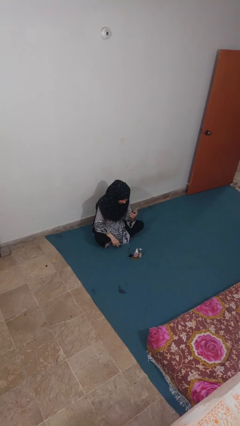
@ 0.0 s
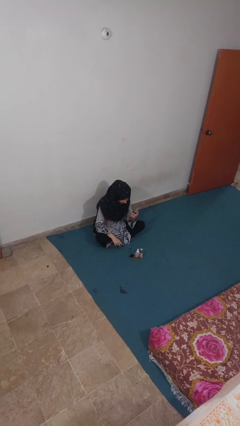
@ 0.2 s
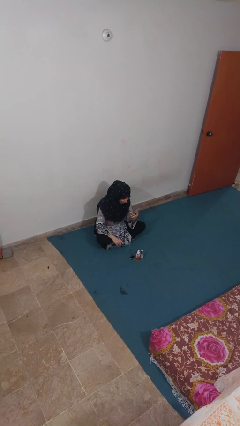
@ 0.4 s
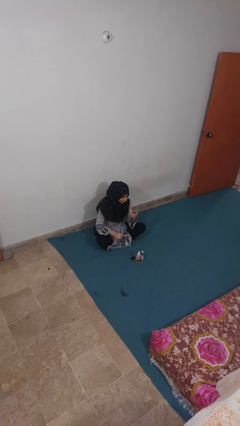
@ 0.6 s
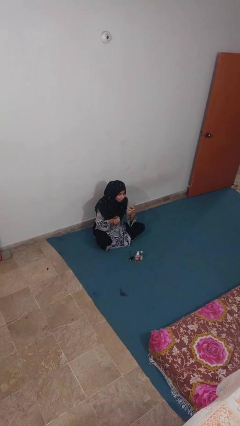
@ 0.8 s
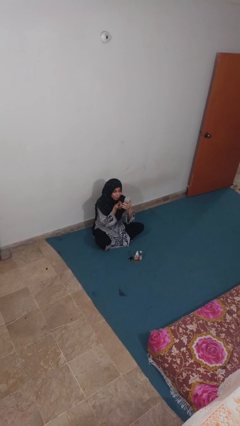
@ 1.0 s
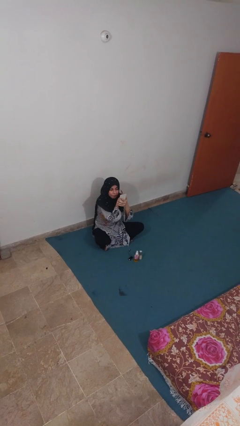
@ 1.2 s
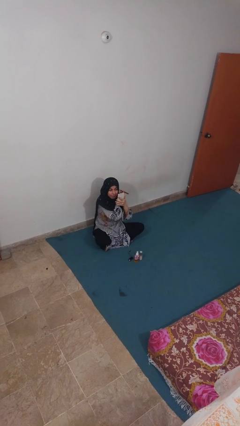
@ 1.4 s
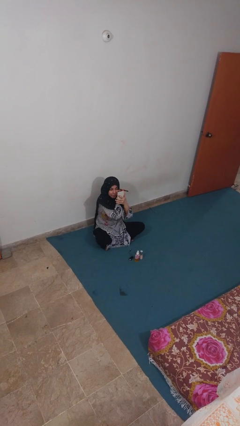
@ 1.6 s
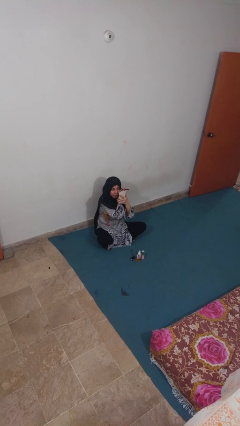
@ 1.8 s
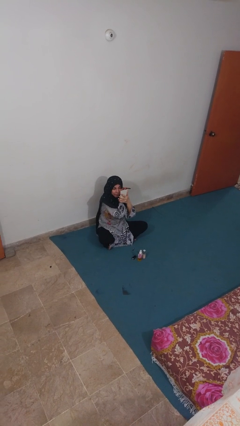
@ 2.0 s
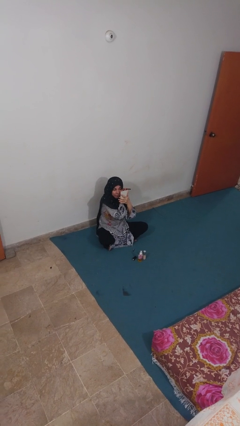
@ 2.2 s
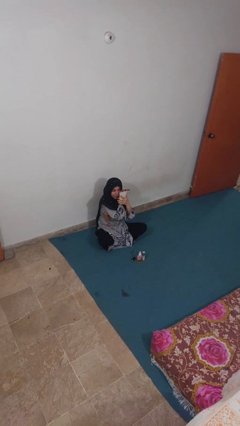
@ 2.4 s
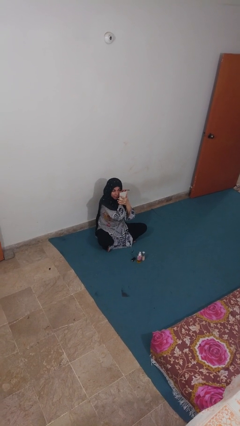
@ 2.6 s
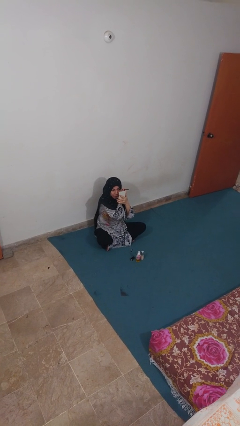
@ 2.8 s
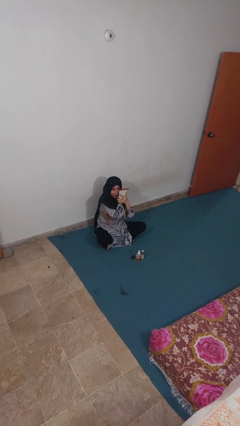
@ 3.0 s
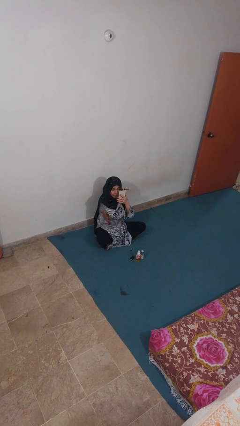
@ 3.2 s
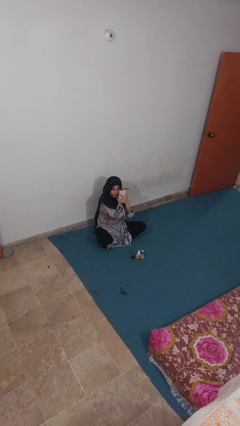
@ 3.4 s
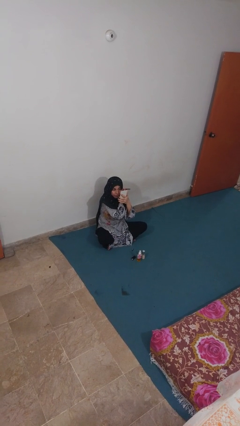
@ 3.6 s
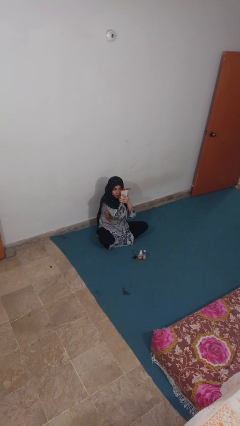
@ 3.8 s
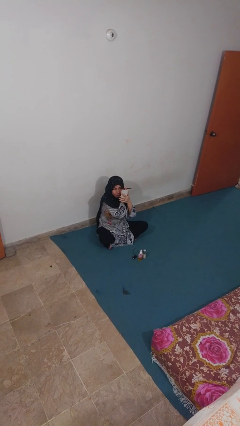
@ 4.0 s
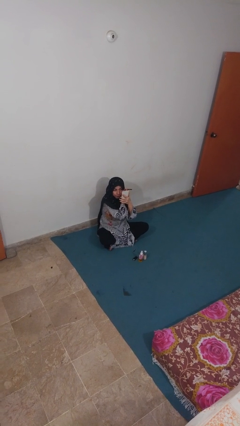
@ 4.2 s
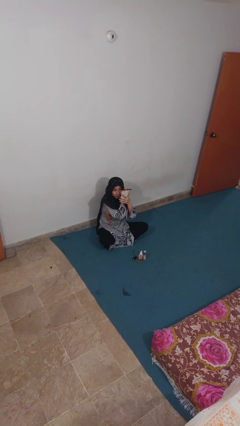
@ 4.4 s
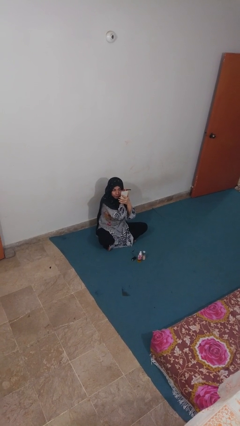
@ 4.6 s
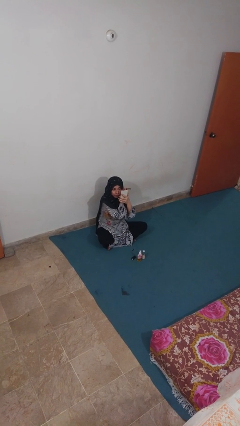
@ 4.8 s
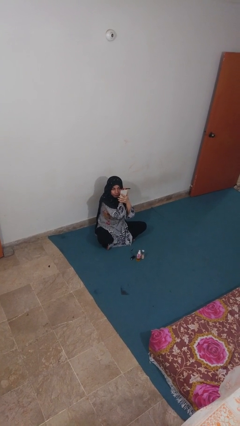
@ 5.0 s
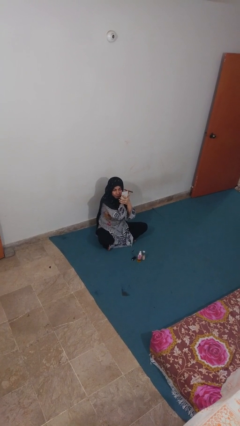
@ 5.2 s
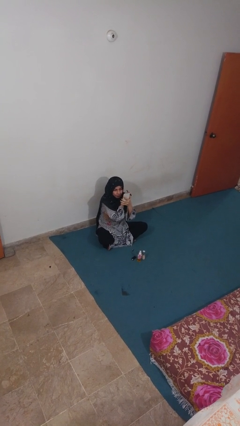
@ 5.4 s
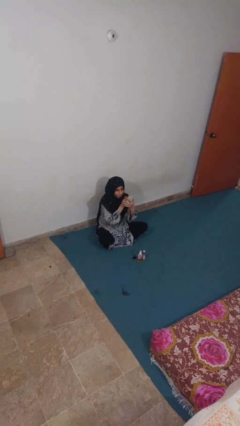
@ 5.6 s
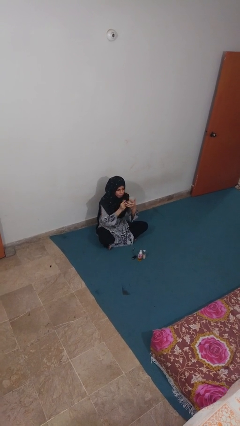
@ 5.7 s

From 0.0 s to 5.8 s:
person applies eye makeup

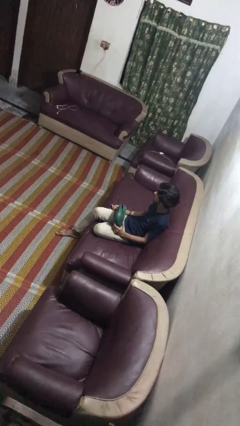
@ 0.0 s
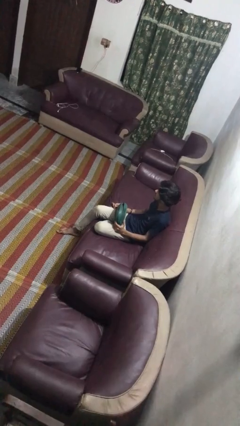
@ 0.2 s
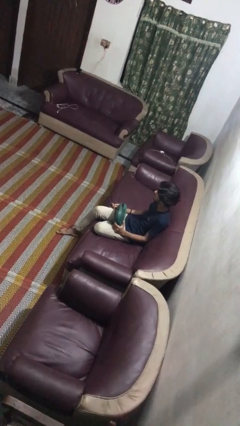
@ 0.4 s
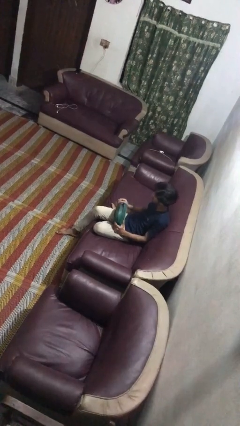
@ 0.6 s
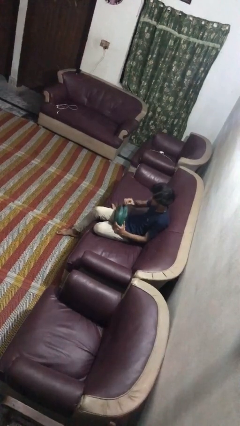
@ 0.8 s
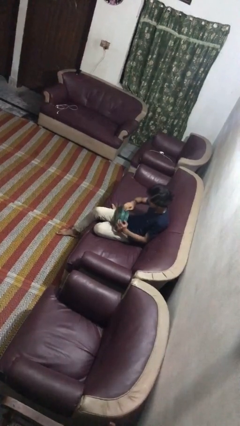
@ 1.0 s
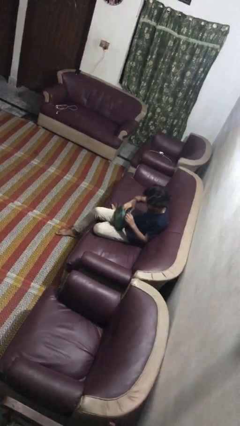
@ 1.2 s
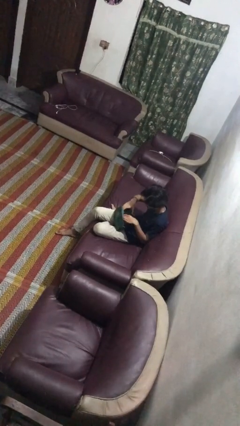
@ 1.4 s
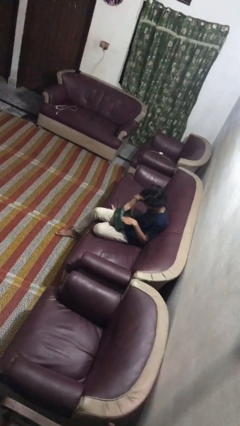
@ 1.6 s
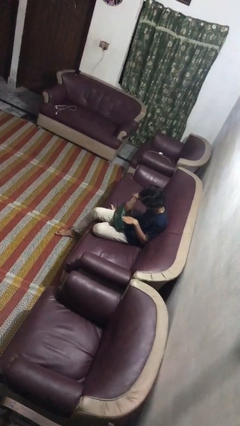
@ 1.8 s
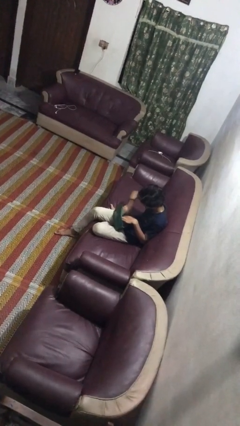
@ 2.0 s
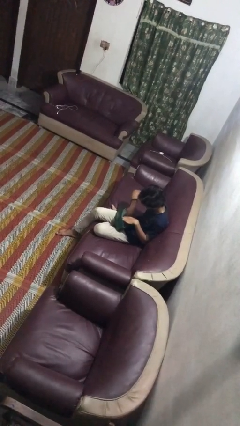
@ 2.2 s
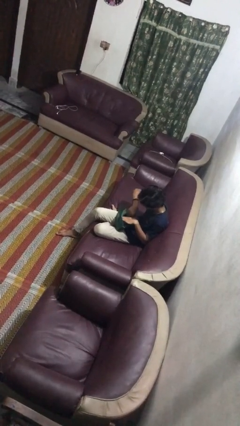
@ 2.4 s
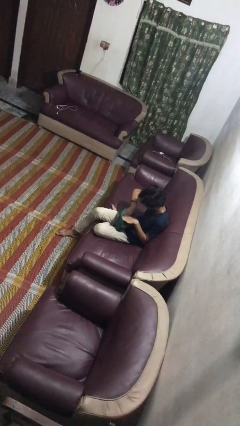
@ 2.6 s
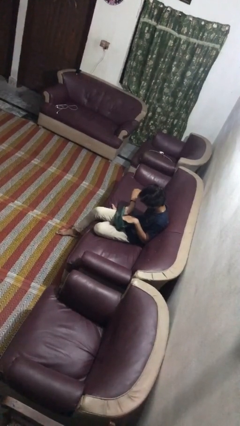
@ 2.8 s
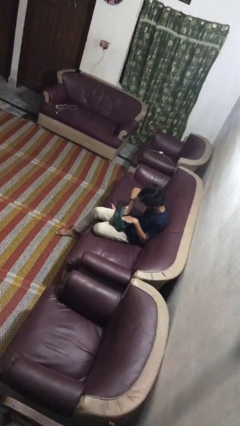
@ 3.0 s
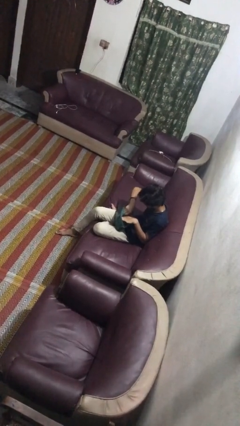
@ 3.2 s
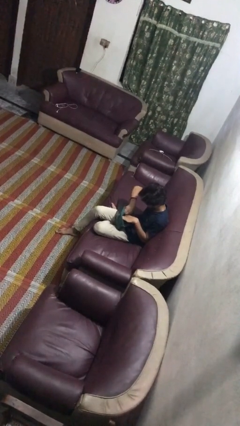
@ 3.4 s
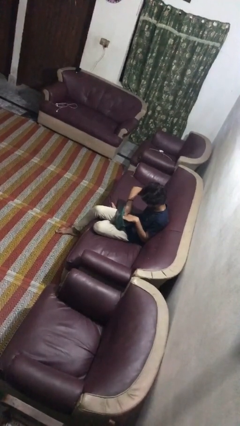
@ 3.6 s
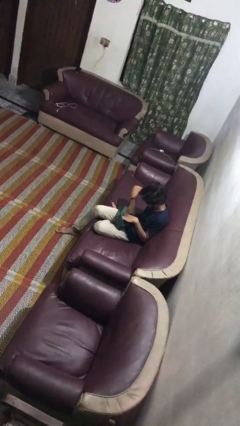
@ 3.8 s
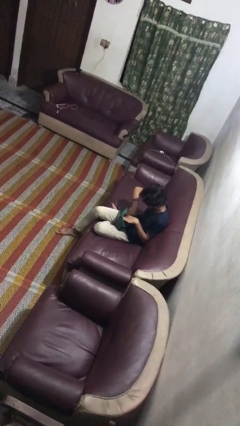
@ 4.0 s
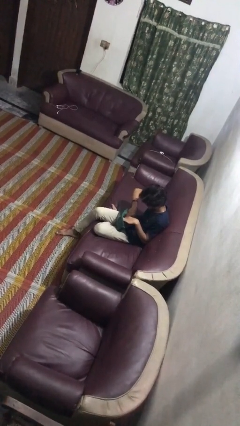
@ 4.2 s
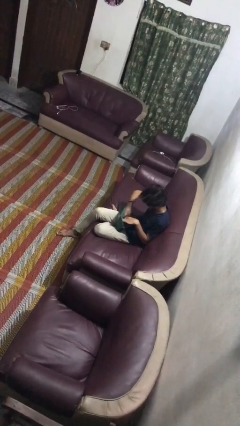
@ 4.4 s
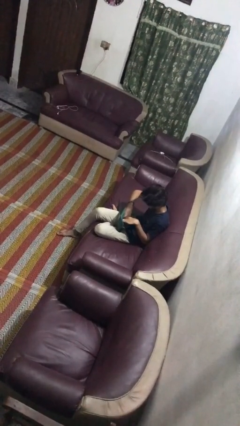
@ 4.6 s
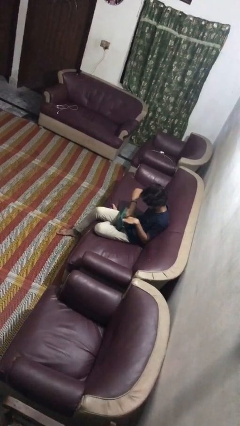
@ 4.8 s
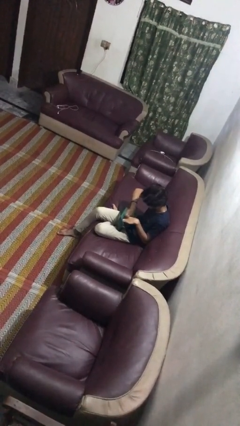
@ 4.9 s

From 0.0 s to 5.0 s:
person searches in purse

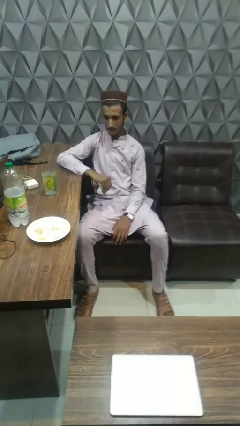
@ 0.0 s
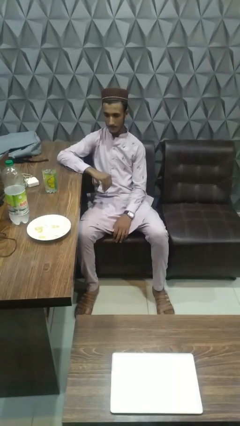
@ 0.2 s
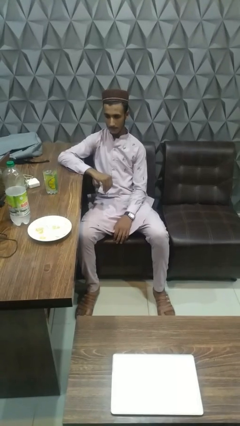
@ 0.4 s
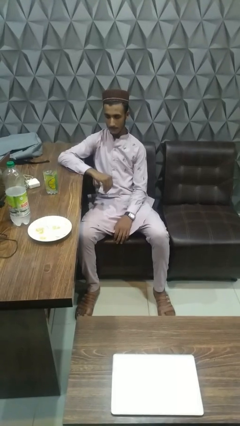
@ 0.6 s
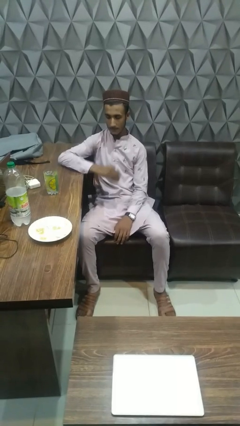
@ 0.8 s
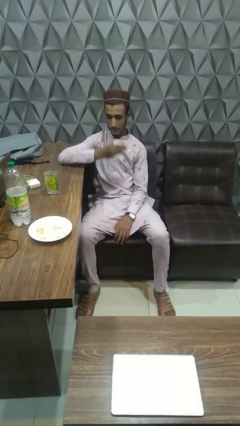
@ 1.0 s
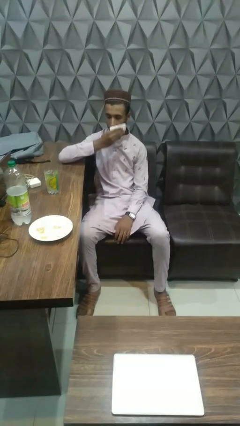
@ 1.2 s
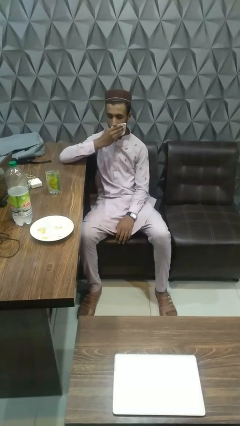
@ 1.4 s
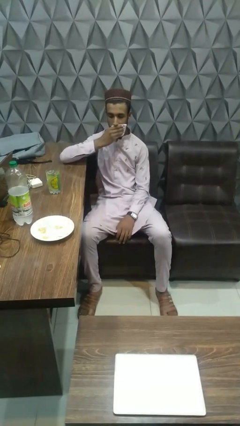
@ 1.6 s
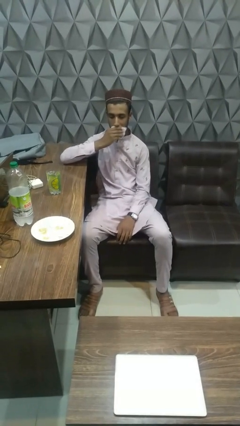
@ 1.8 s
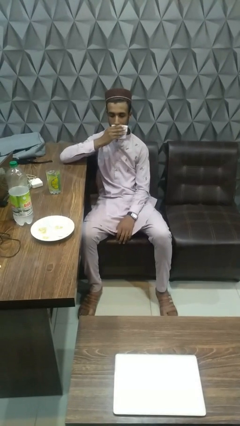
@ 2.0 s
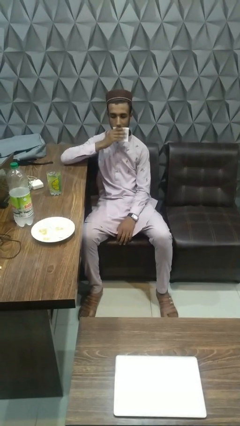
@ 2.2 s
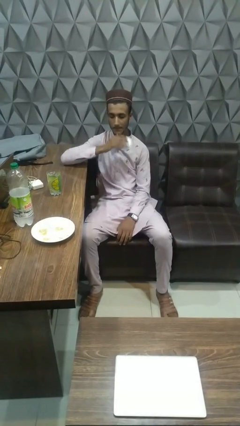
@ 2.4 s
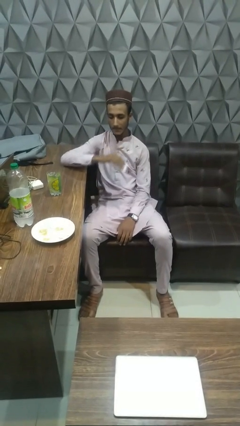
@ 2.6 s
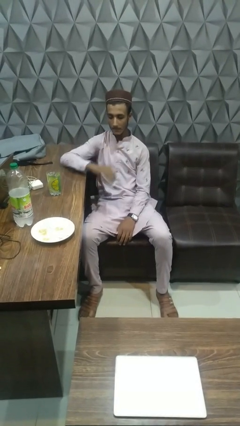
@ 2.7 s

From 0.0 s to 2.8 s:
person wipes mouth with napkin

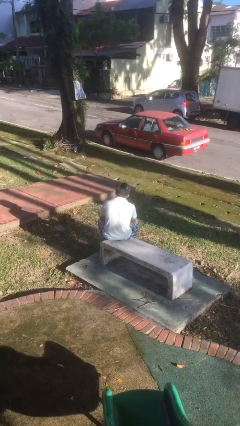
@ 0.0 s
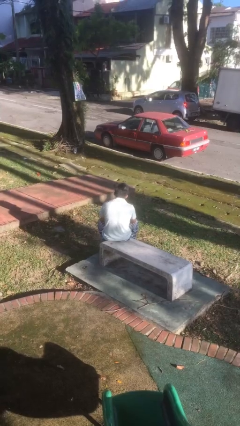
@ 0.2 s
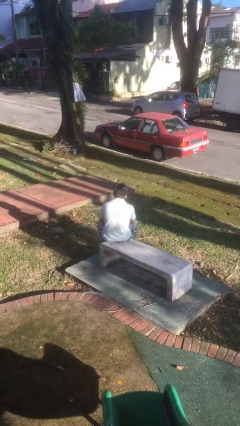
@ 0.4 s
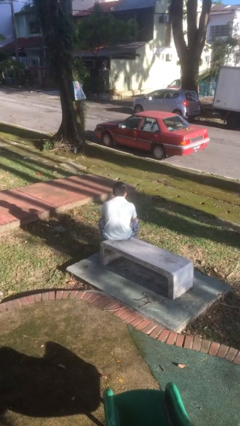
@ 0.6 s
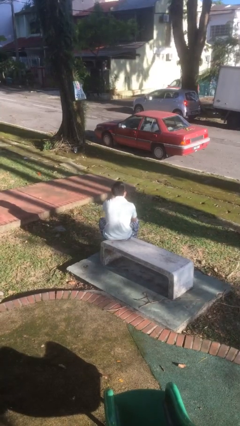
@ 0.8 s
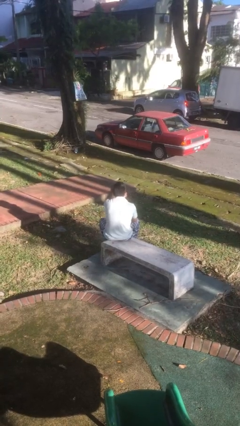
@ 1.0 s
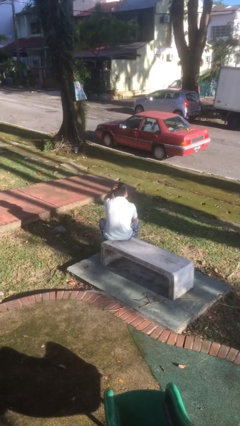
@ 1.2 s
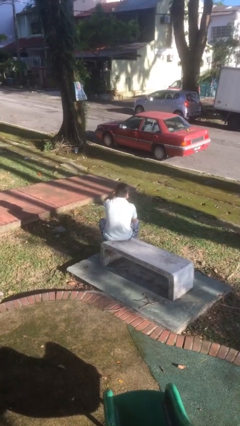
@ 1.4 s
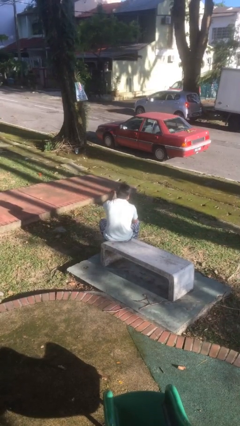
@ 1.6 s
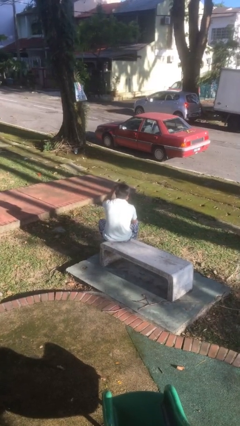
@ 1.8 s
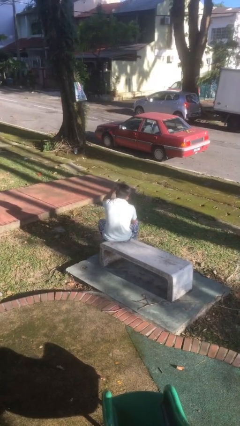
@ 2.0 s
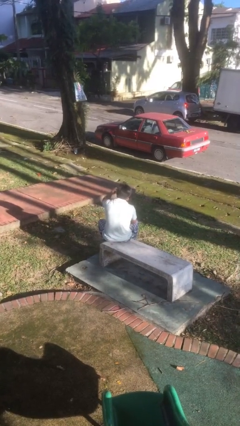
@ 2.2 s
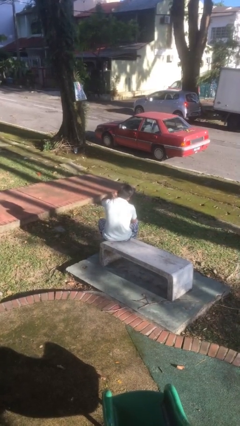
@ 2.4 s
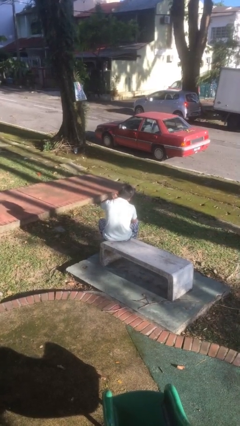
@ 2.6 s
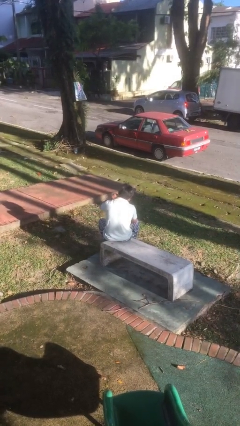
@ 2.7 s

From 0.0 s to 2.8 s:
person strokes hair

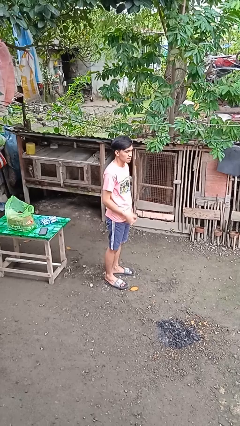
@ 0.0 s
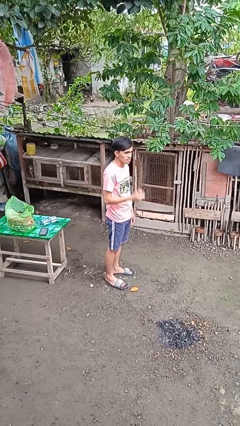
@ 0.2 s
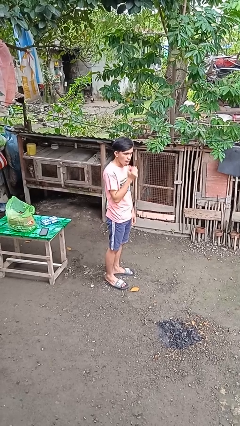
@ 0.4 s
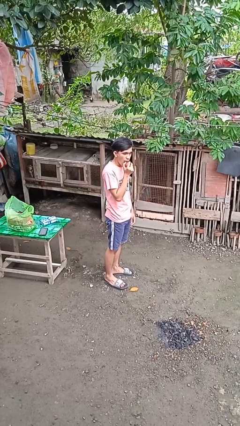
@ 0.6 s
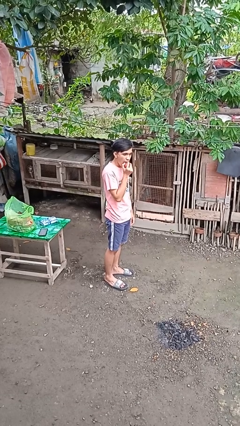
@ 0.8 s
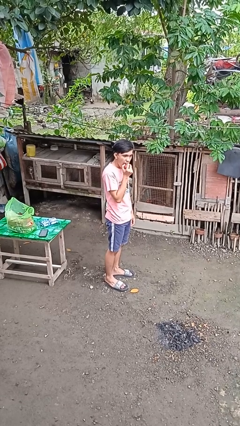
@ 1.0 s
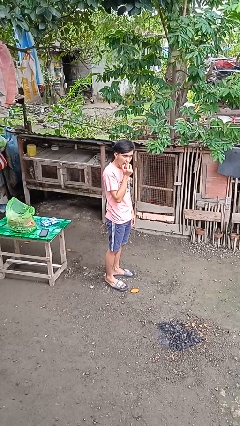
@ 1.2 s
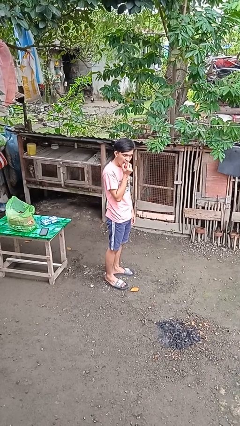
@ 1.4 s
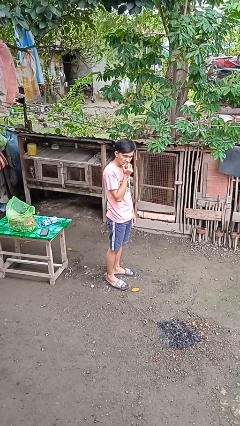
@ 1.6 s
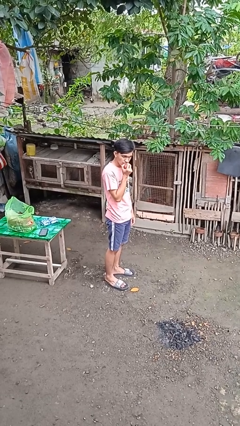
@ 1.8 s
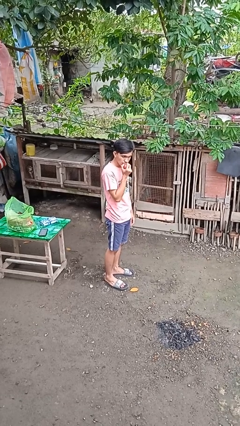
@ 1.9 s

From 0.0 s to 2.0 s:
person eats apple
